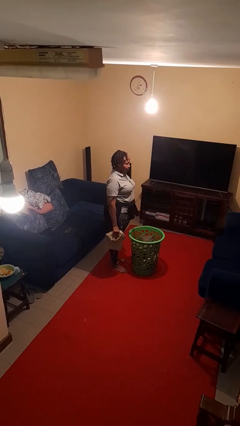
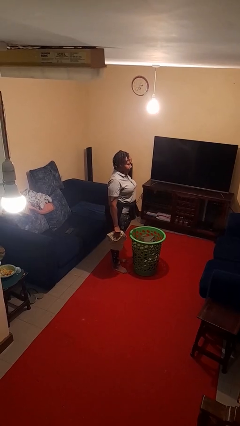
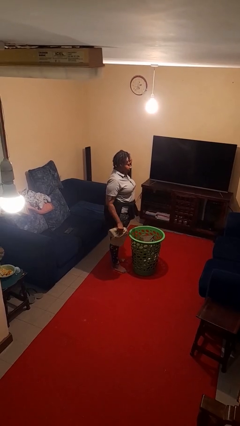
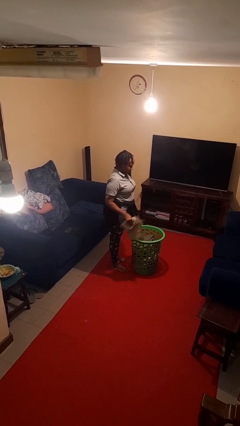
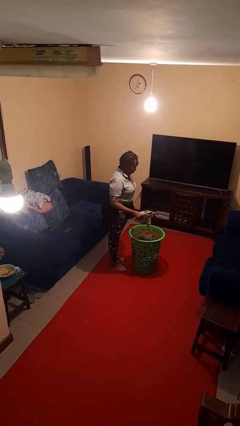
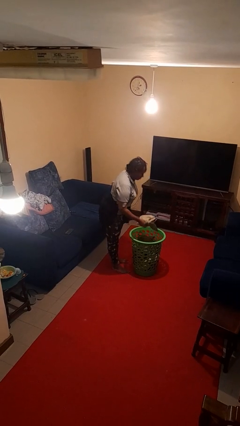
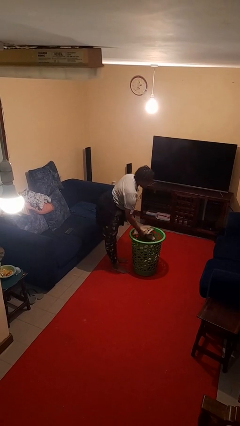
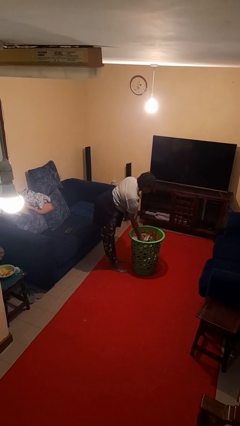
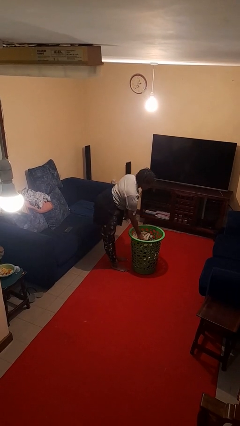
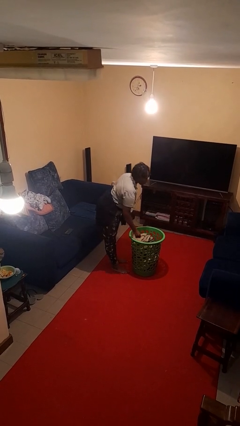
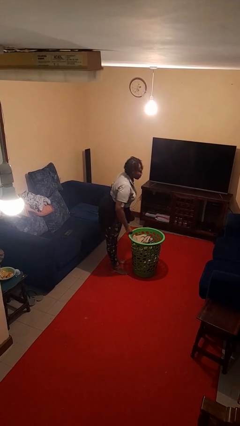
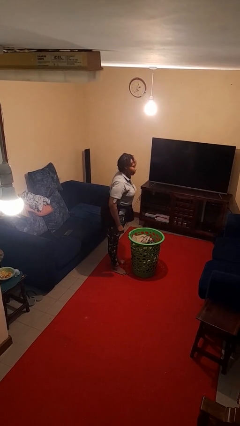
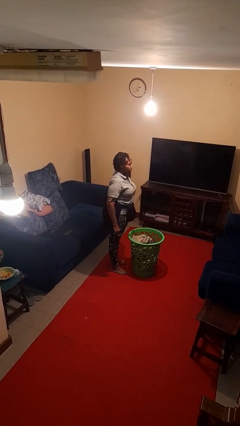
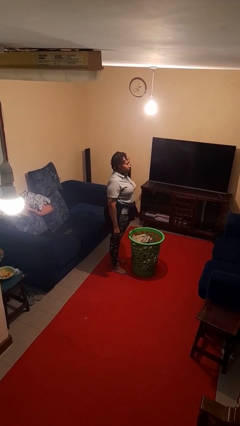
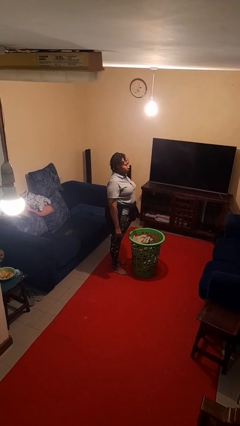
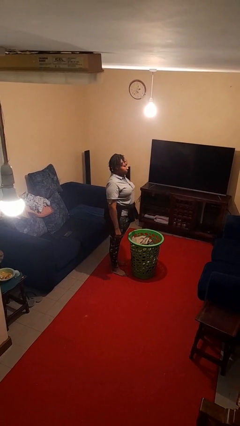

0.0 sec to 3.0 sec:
person puts object into basket

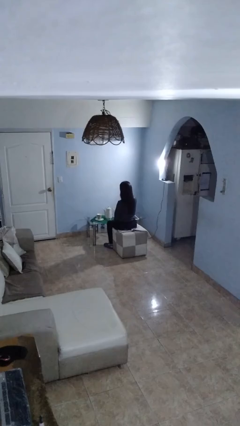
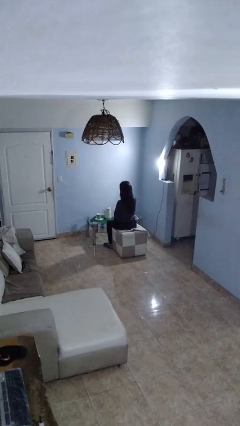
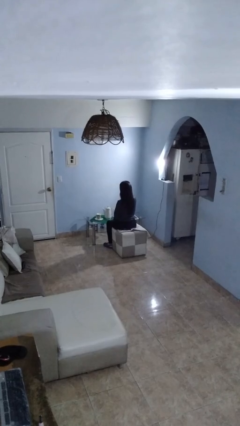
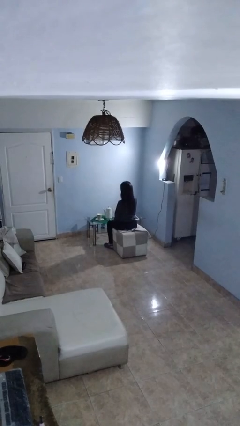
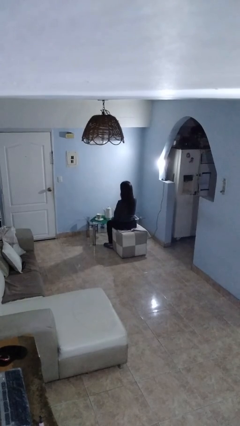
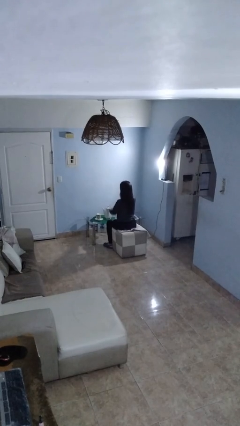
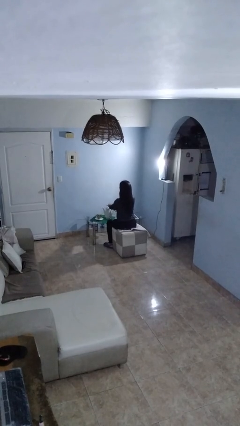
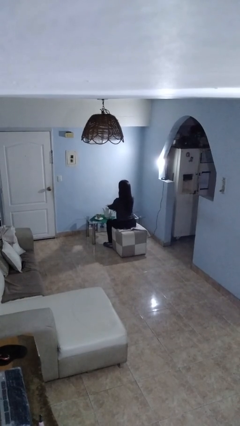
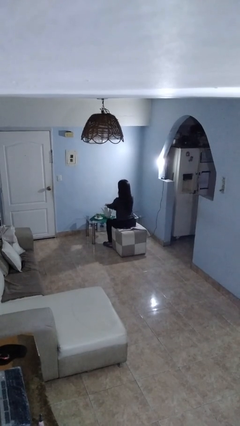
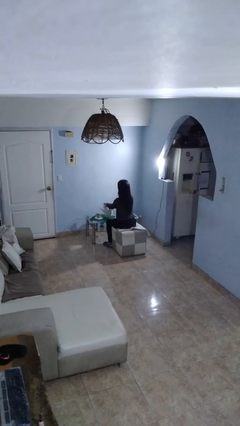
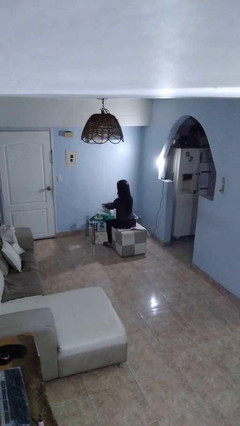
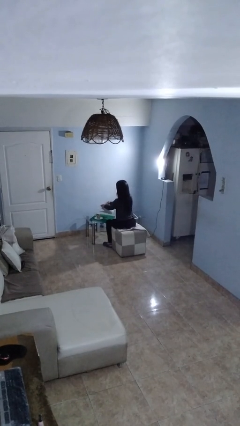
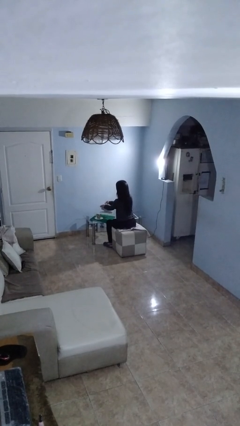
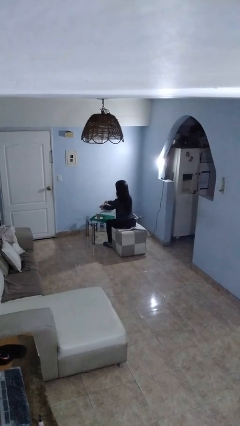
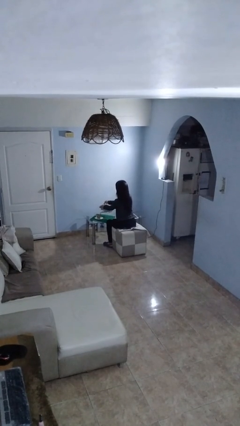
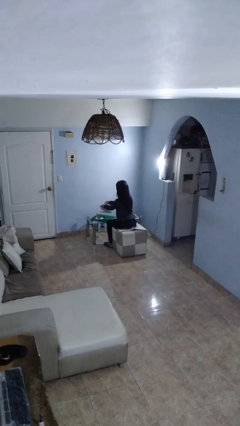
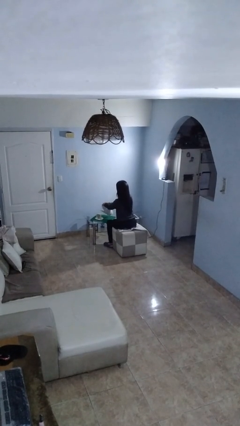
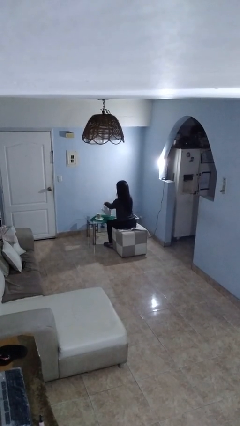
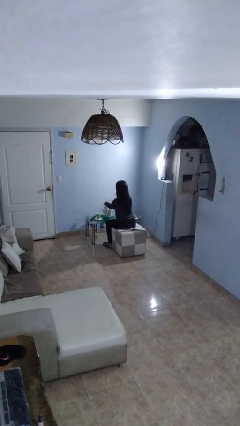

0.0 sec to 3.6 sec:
person pours coffee into mug

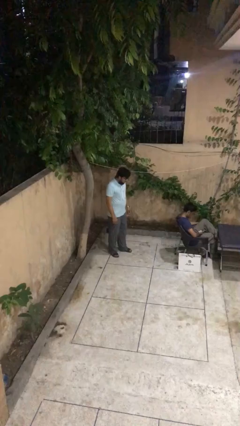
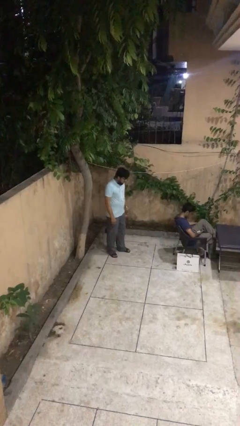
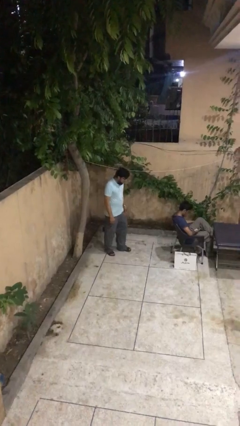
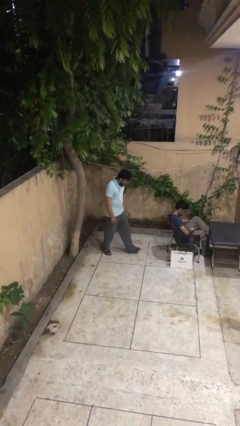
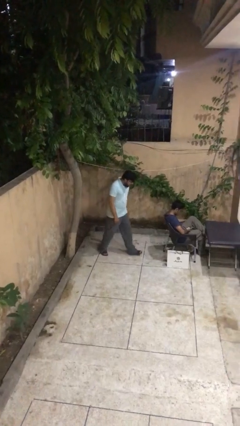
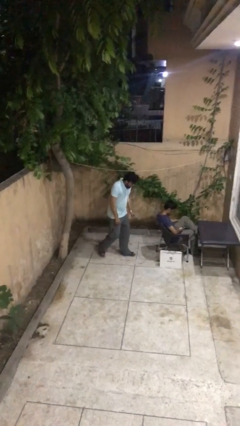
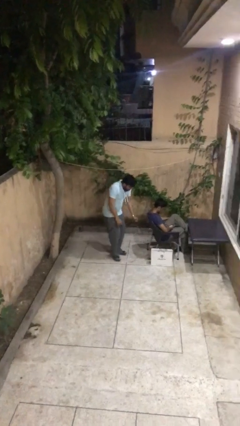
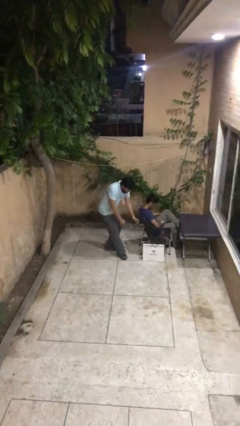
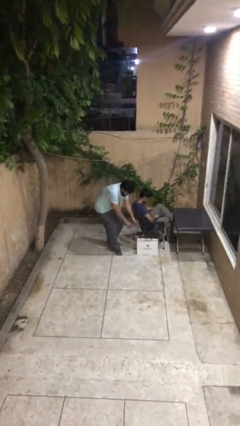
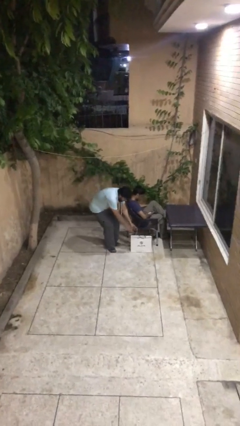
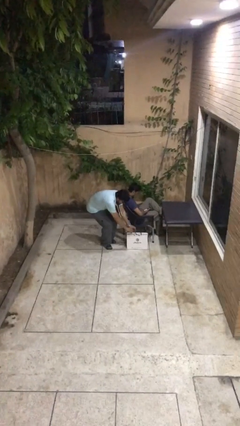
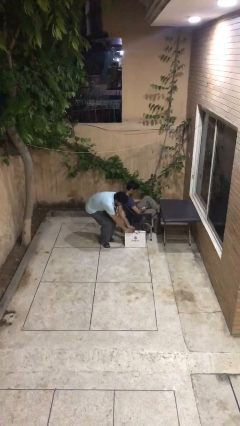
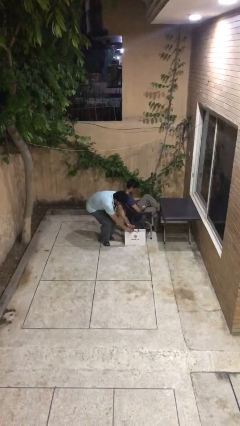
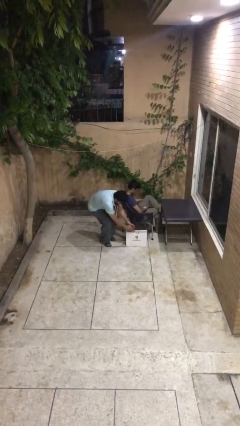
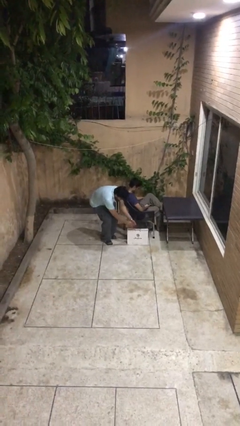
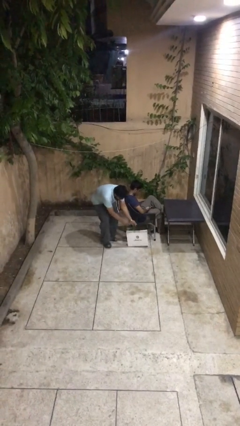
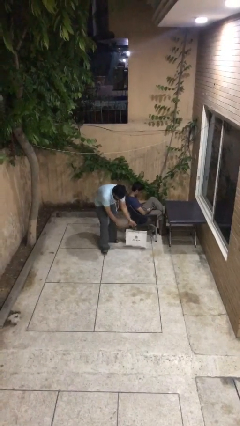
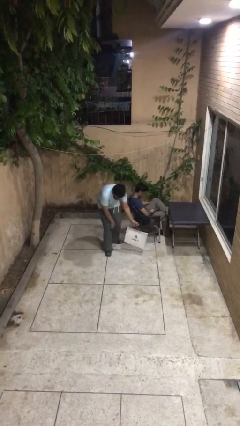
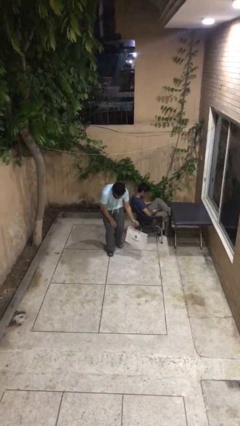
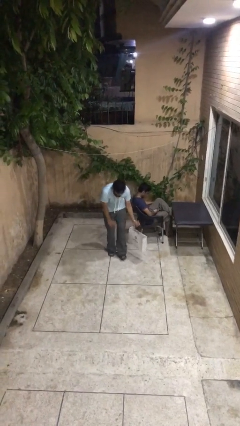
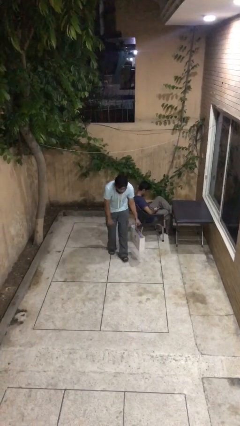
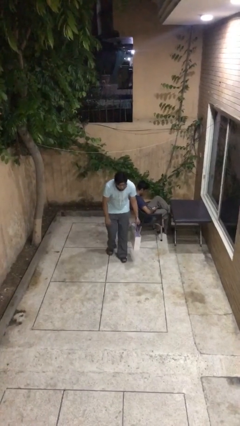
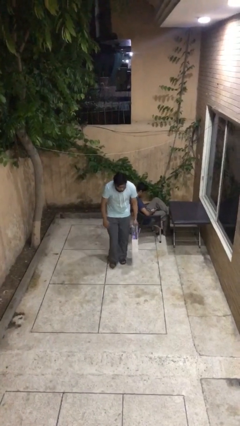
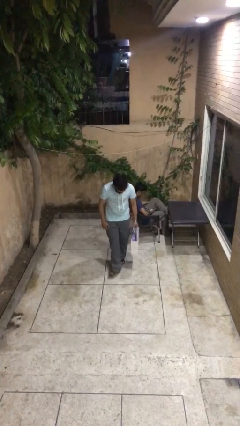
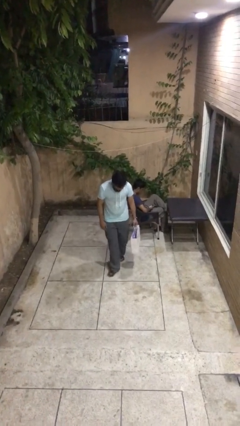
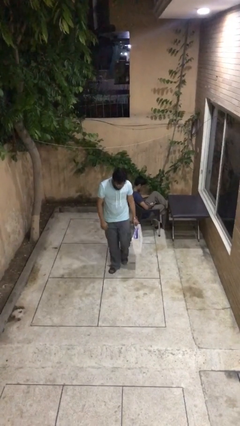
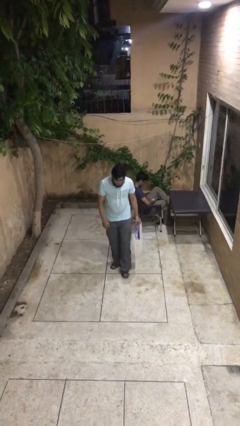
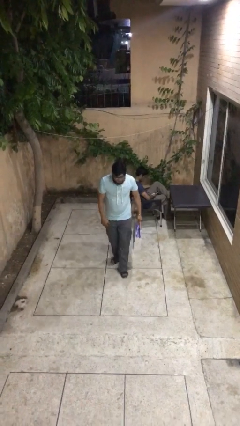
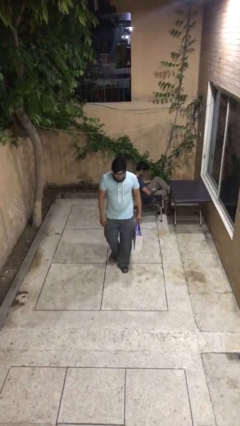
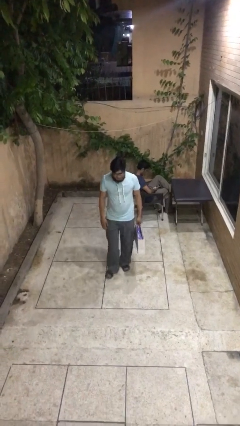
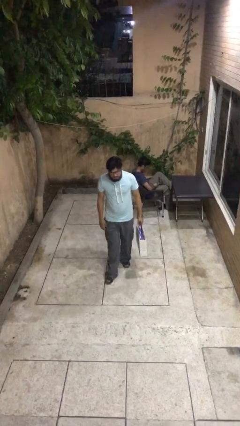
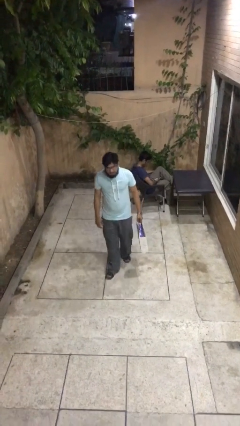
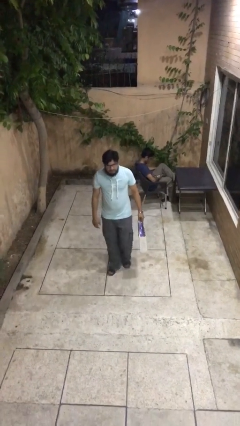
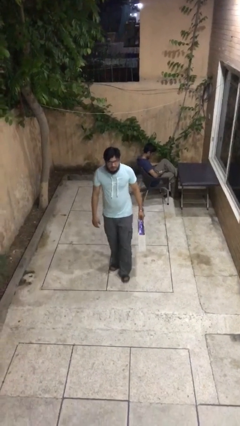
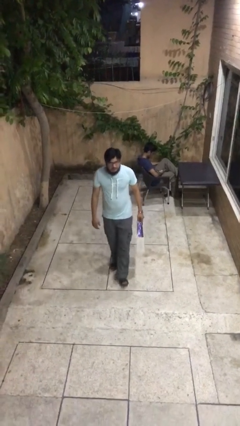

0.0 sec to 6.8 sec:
person steals object from person

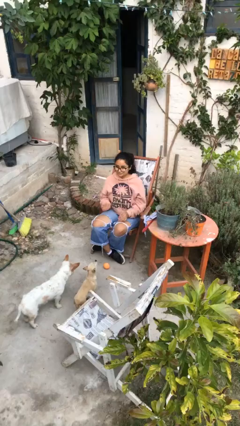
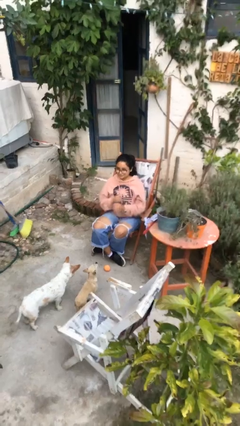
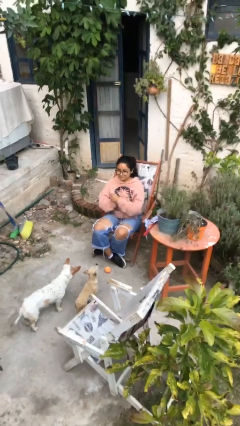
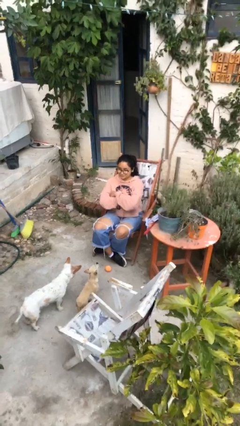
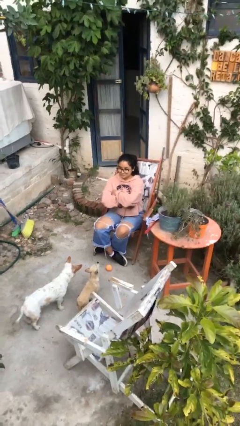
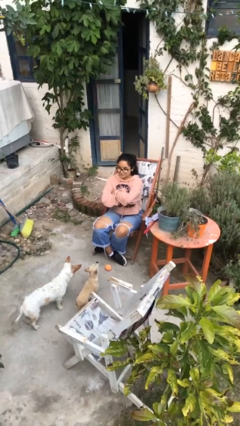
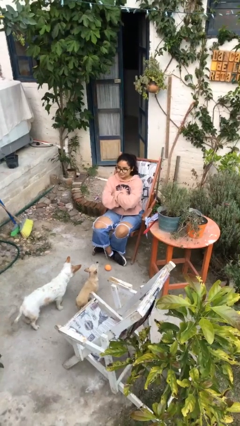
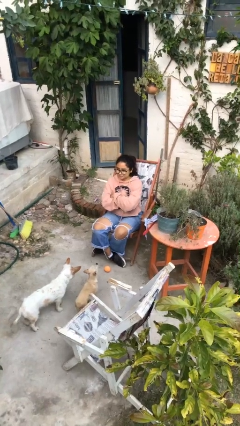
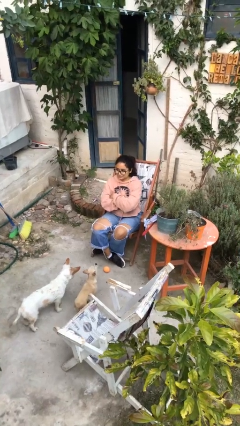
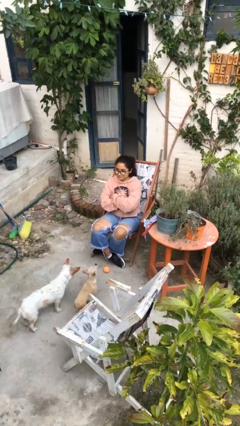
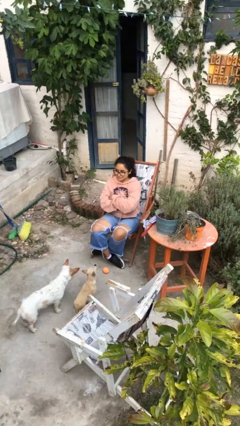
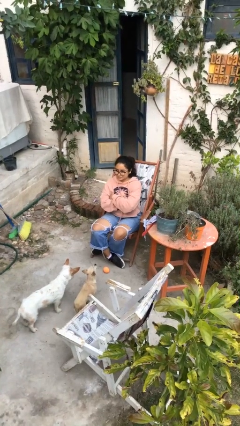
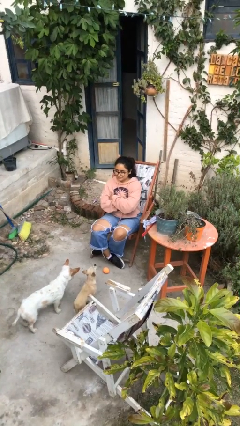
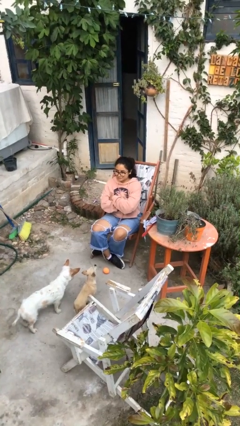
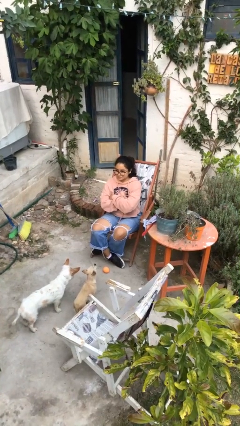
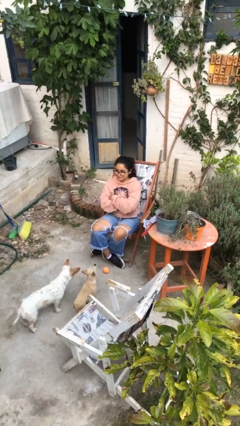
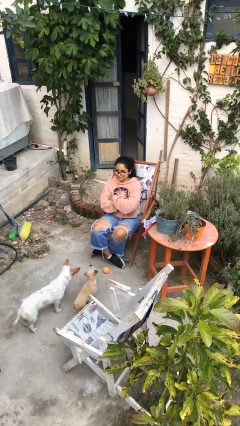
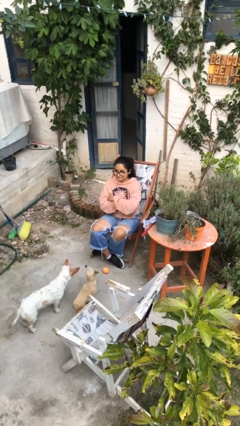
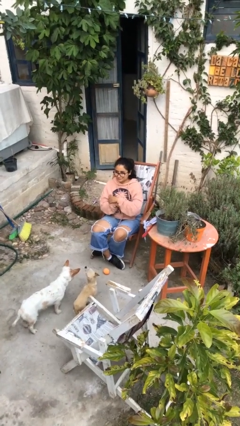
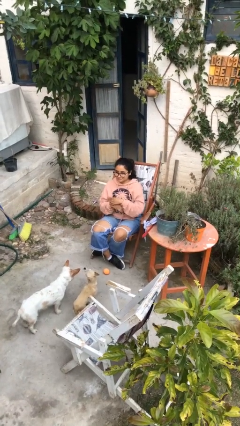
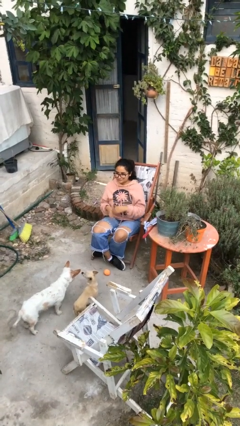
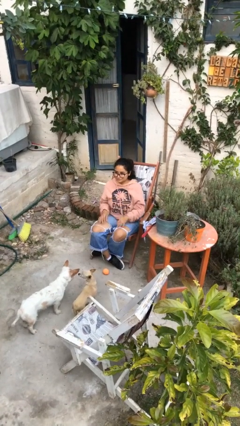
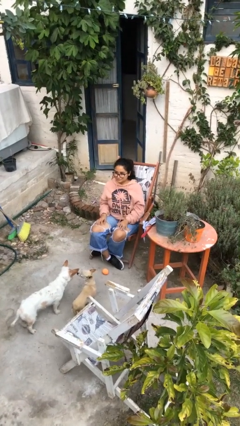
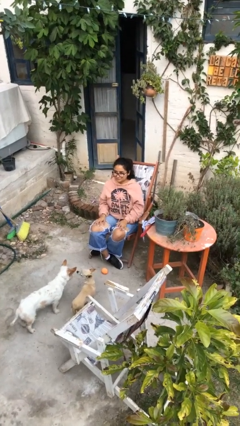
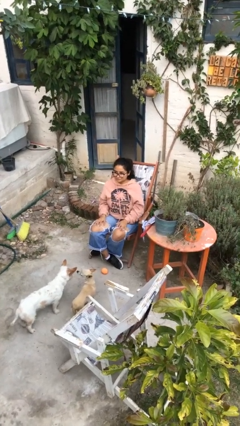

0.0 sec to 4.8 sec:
person crosses arms
